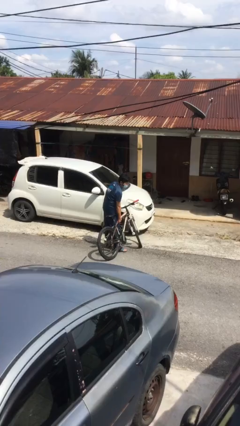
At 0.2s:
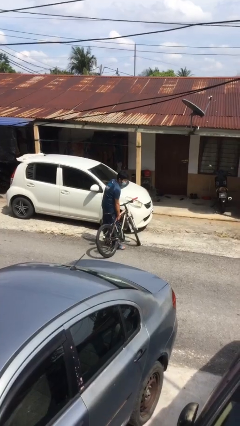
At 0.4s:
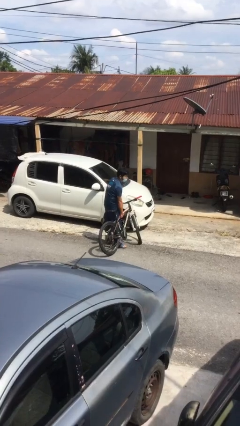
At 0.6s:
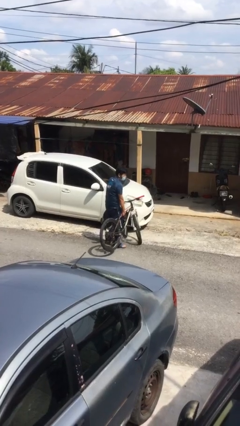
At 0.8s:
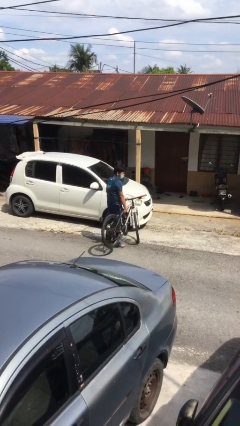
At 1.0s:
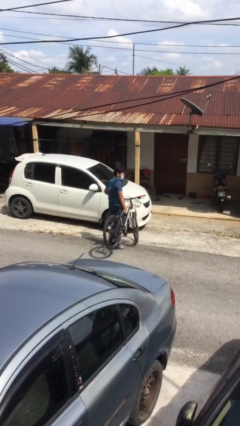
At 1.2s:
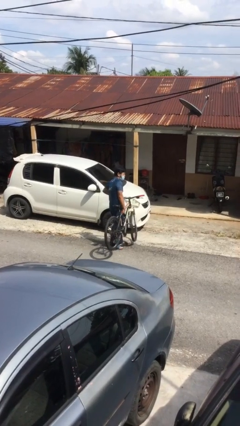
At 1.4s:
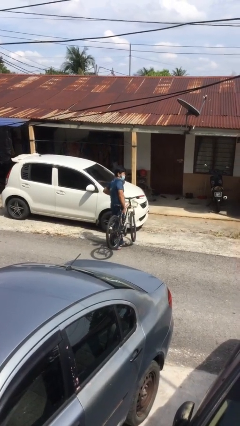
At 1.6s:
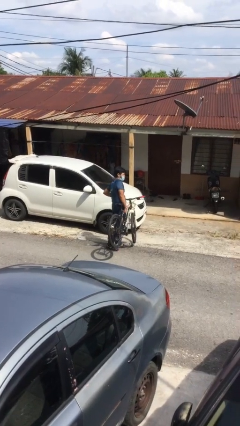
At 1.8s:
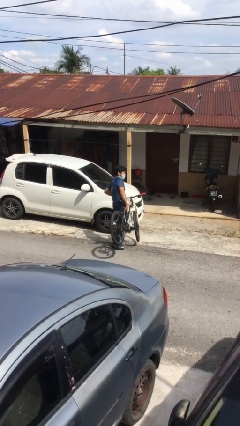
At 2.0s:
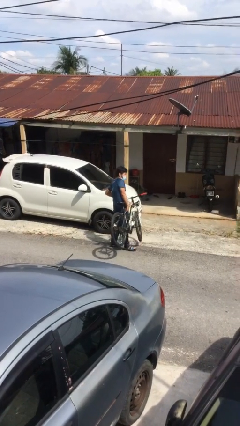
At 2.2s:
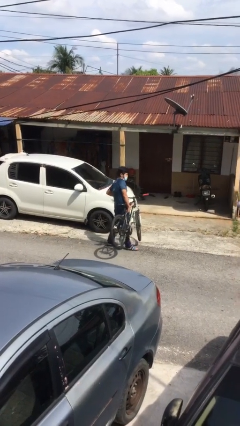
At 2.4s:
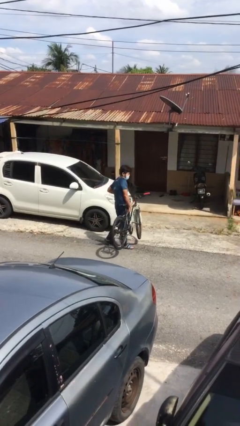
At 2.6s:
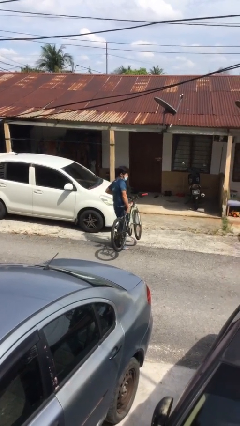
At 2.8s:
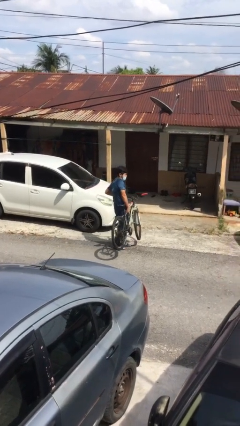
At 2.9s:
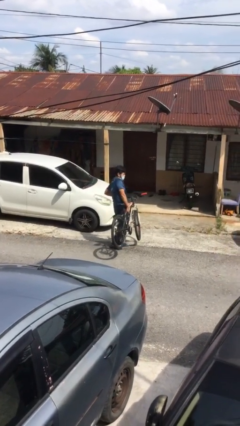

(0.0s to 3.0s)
person carries bicycle

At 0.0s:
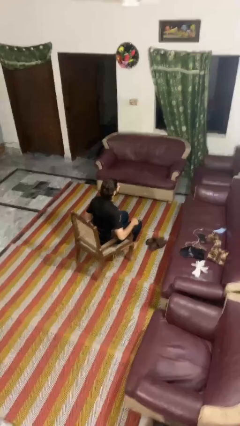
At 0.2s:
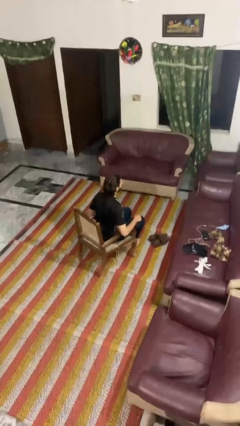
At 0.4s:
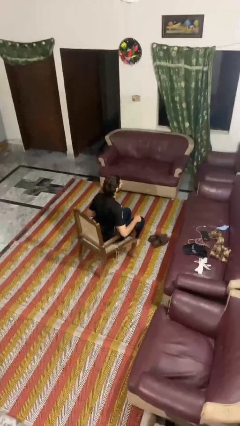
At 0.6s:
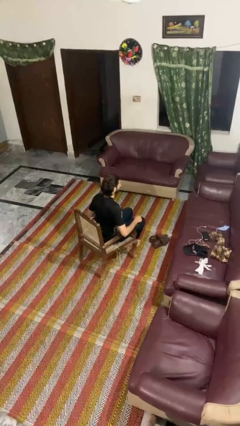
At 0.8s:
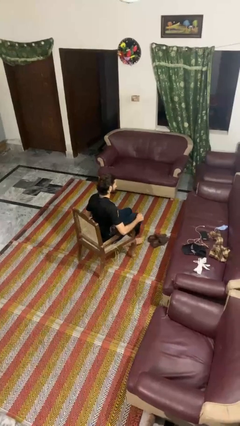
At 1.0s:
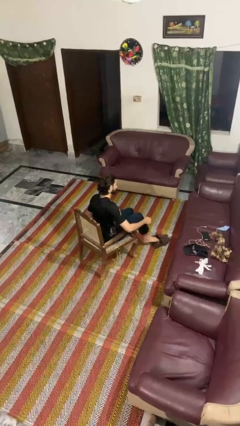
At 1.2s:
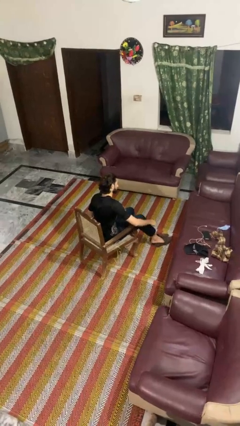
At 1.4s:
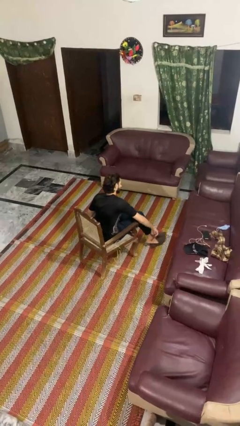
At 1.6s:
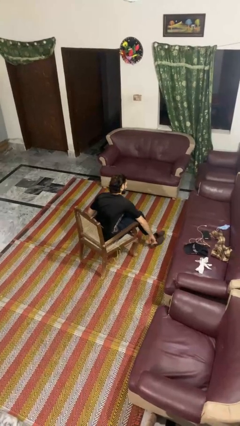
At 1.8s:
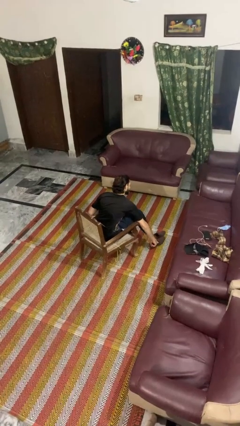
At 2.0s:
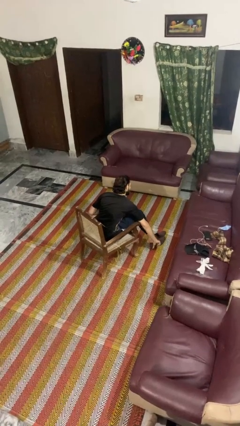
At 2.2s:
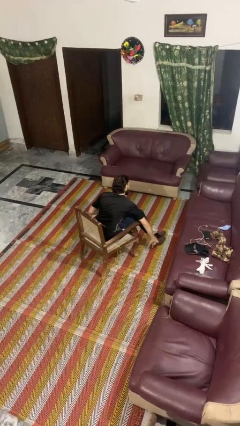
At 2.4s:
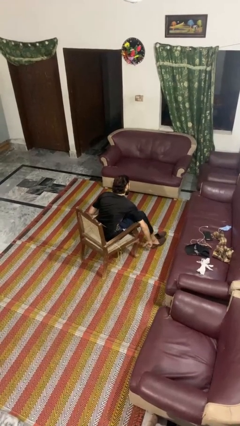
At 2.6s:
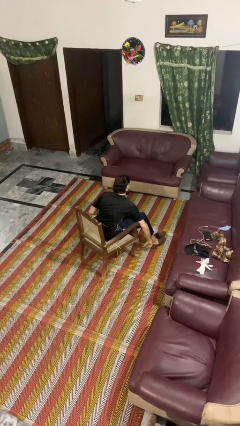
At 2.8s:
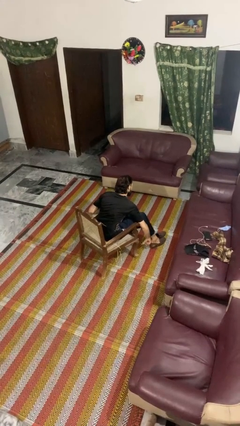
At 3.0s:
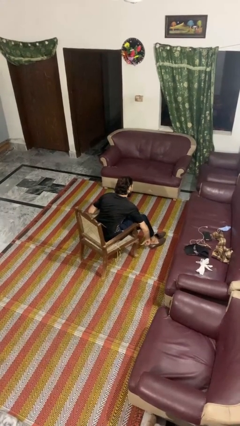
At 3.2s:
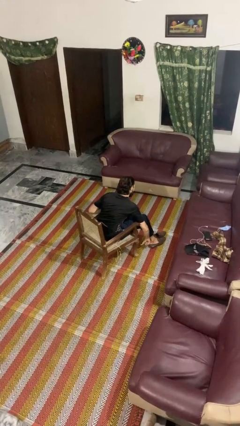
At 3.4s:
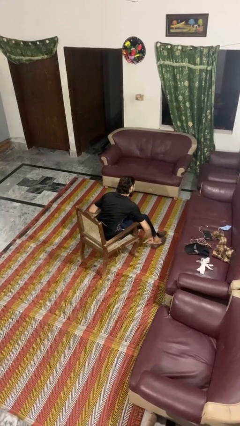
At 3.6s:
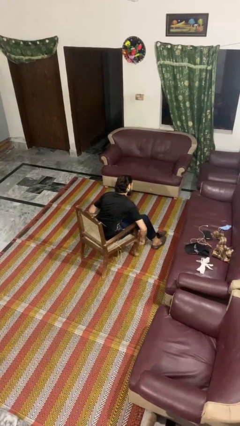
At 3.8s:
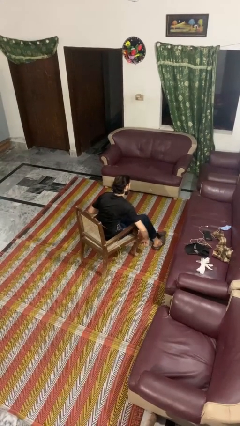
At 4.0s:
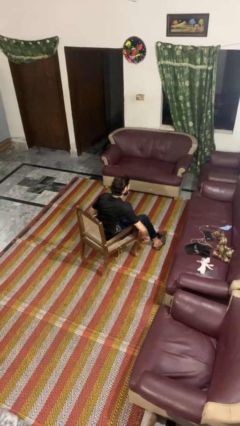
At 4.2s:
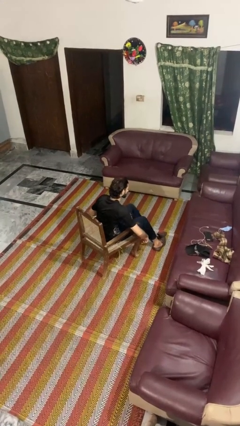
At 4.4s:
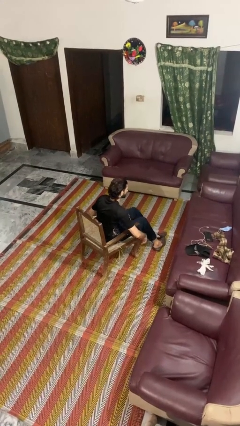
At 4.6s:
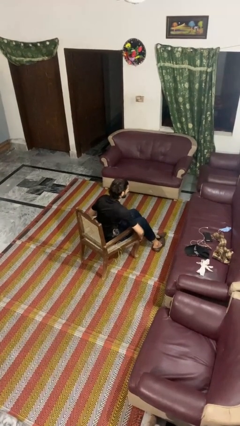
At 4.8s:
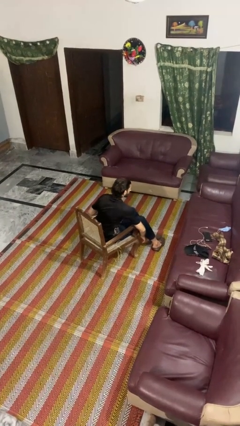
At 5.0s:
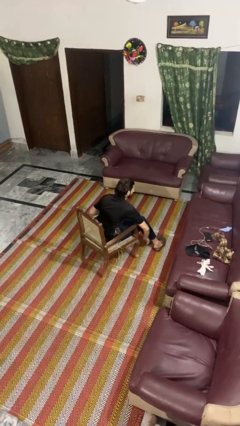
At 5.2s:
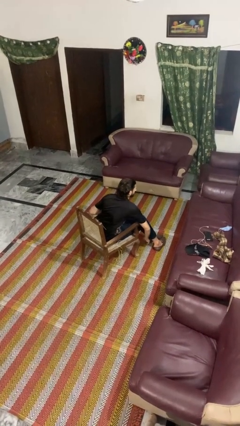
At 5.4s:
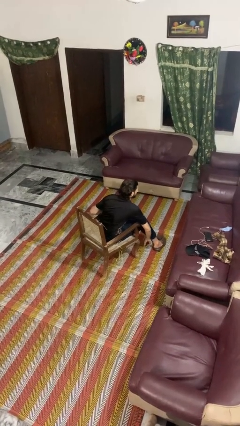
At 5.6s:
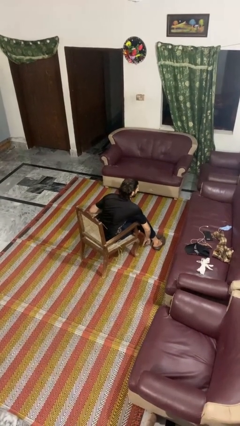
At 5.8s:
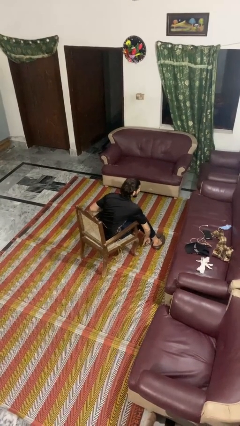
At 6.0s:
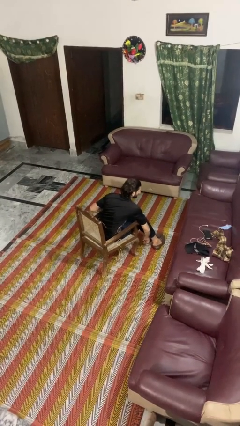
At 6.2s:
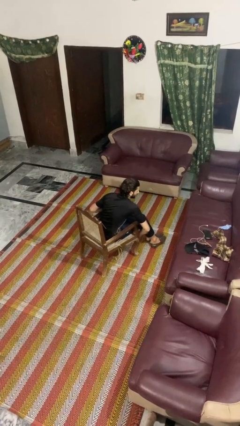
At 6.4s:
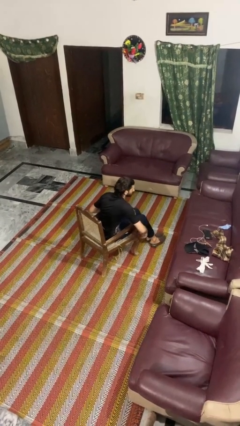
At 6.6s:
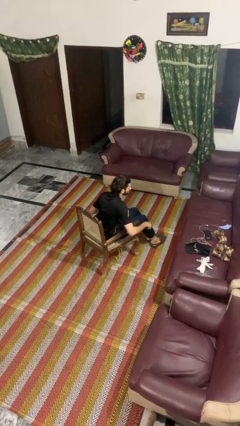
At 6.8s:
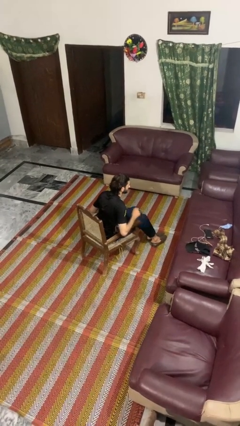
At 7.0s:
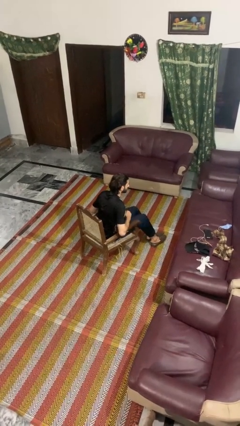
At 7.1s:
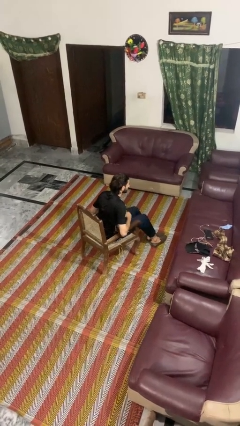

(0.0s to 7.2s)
person puts on shoes

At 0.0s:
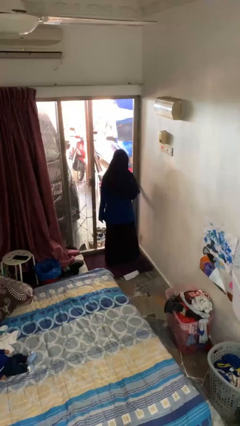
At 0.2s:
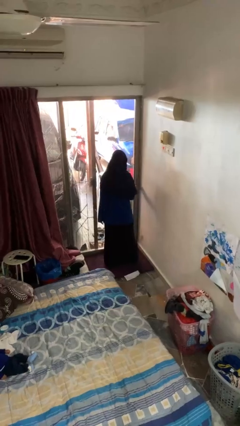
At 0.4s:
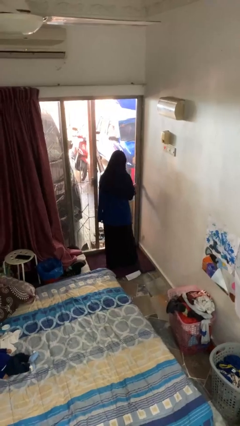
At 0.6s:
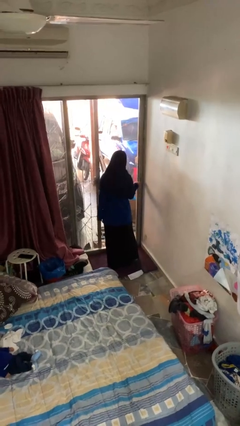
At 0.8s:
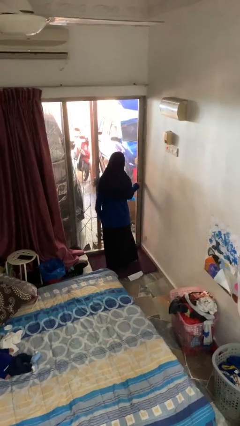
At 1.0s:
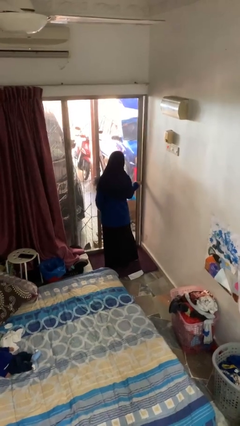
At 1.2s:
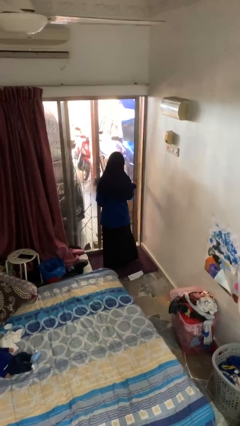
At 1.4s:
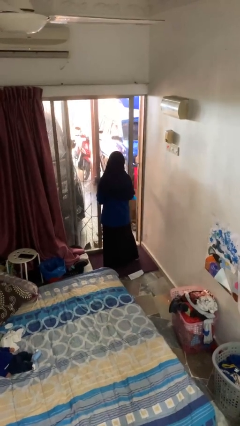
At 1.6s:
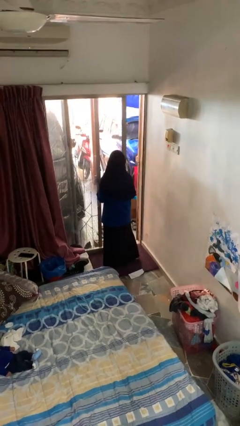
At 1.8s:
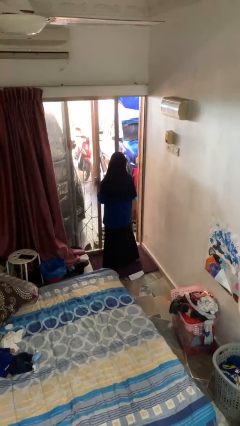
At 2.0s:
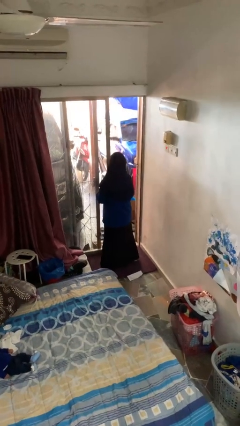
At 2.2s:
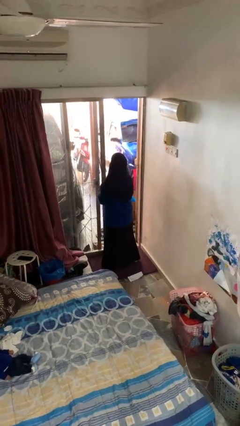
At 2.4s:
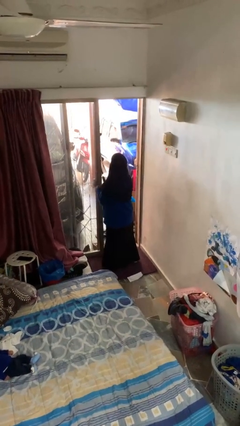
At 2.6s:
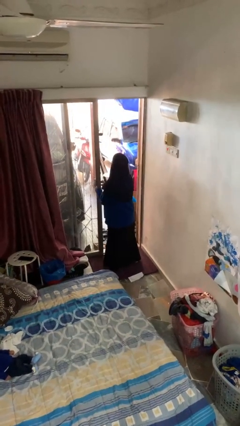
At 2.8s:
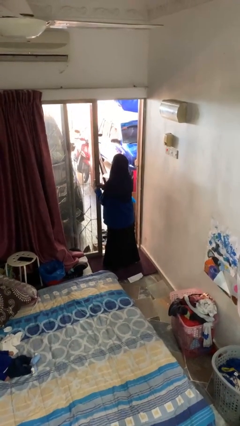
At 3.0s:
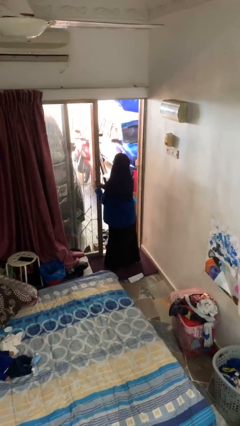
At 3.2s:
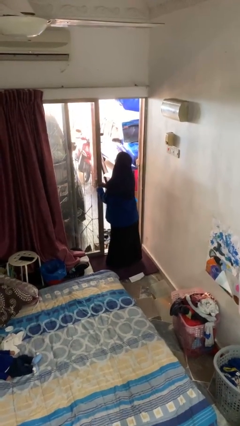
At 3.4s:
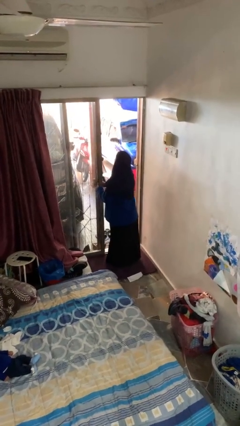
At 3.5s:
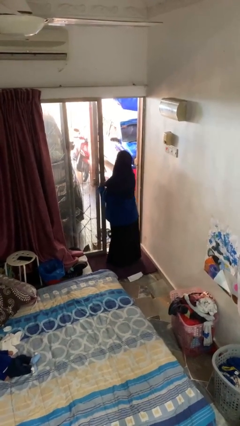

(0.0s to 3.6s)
person opens sliding door

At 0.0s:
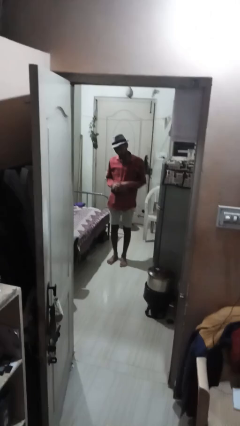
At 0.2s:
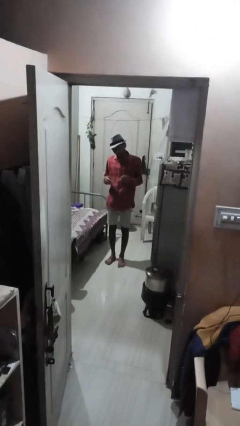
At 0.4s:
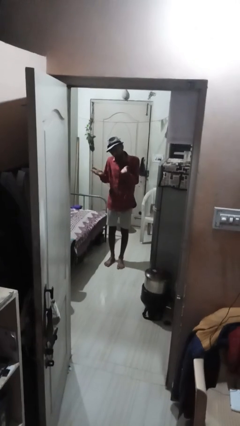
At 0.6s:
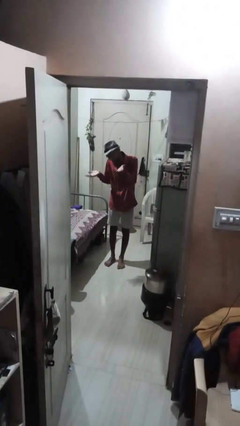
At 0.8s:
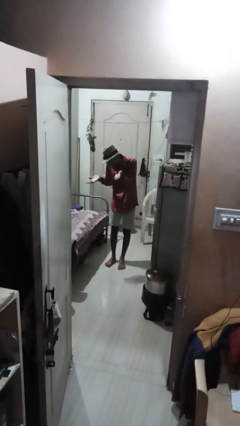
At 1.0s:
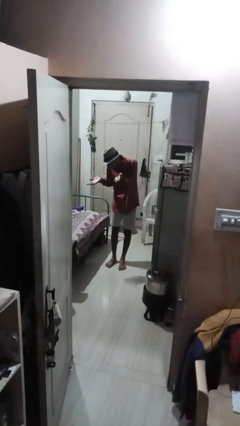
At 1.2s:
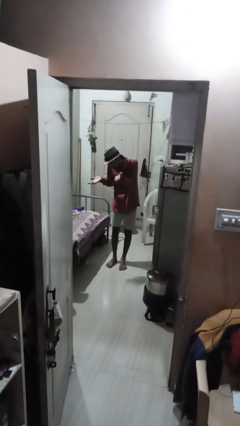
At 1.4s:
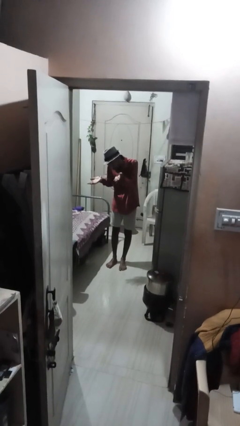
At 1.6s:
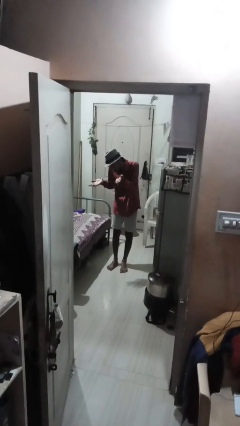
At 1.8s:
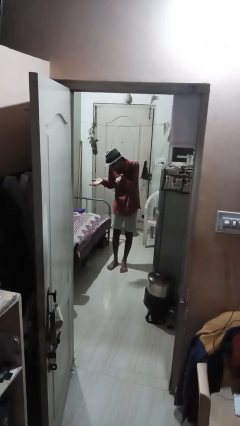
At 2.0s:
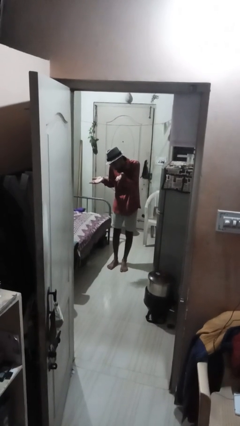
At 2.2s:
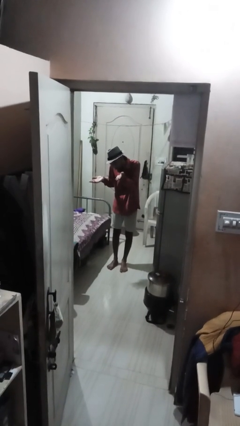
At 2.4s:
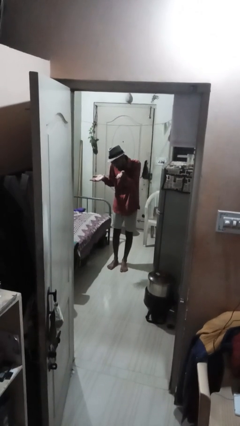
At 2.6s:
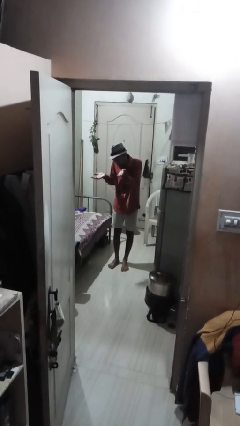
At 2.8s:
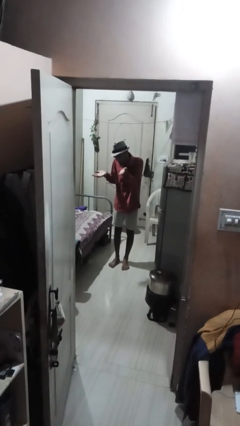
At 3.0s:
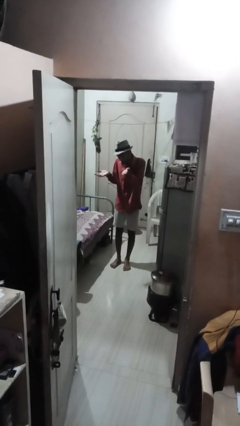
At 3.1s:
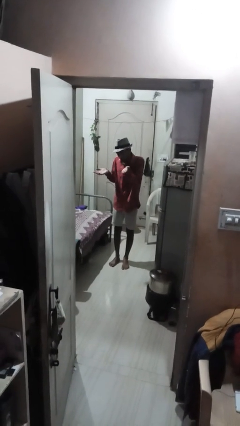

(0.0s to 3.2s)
person shrugs

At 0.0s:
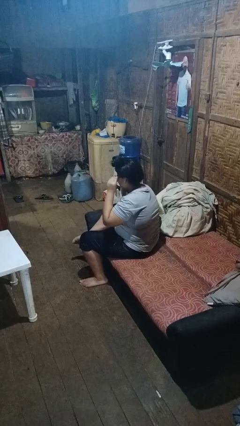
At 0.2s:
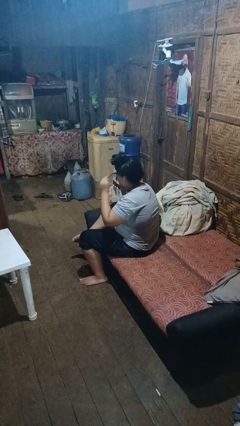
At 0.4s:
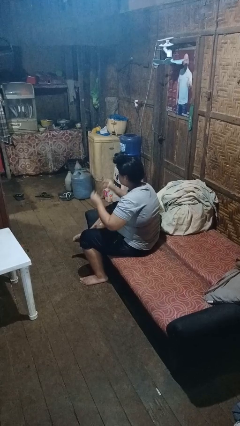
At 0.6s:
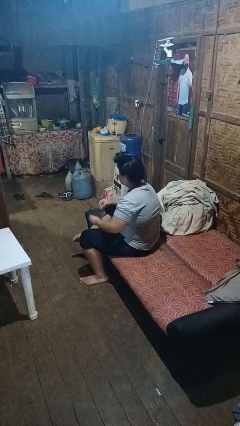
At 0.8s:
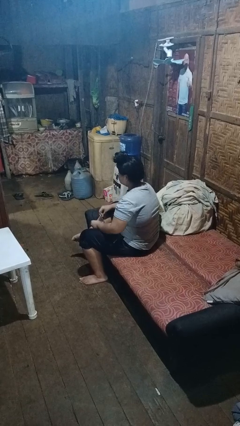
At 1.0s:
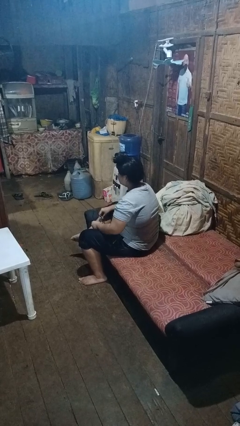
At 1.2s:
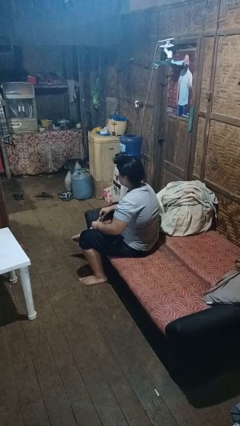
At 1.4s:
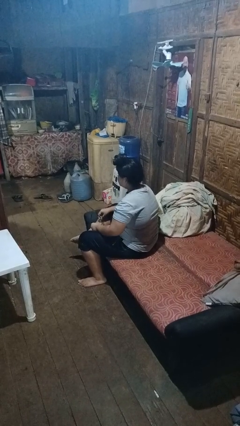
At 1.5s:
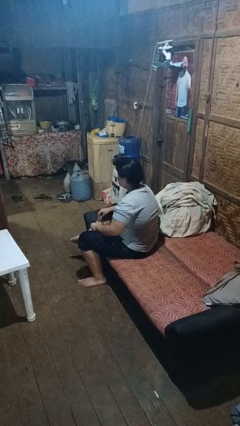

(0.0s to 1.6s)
person takes off glasses
